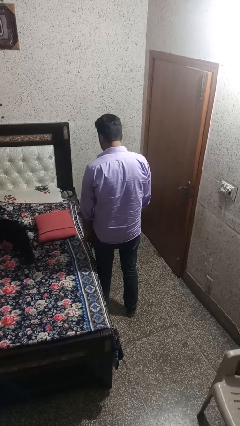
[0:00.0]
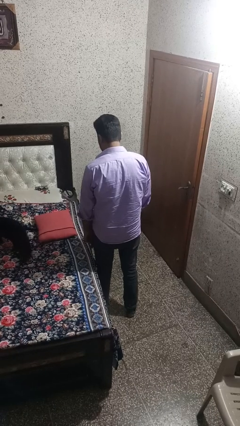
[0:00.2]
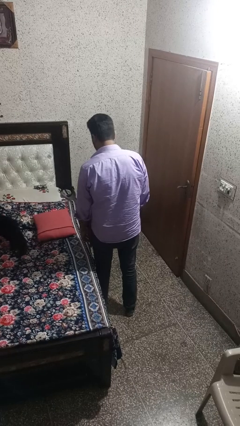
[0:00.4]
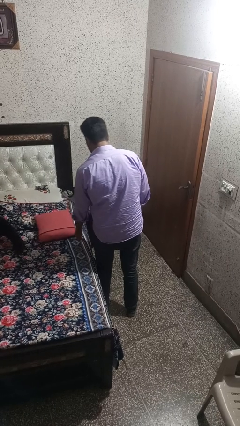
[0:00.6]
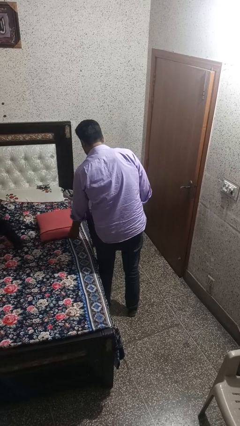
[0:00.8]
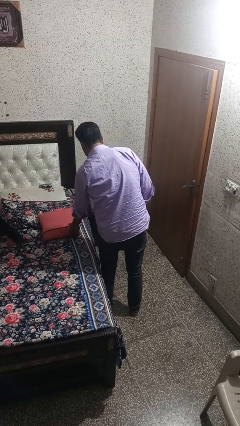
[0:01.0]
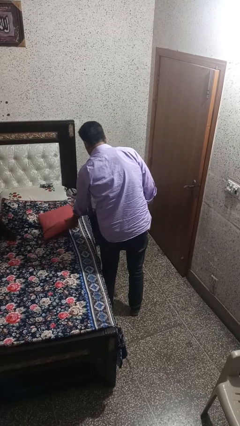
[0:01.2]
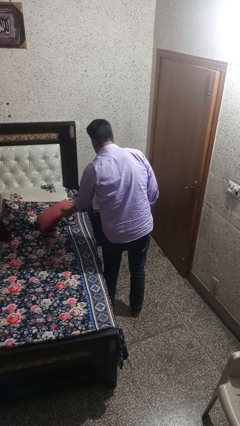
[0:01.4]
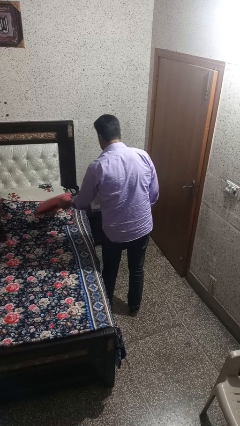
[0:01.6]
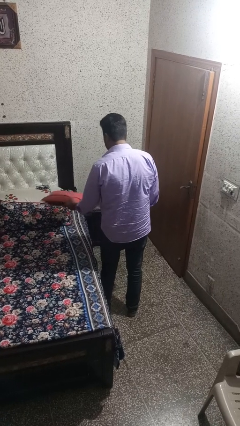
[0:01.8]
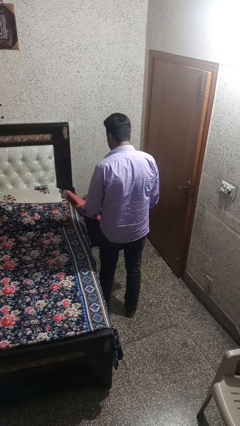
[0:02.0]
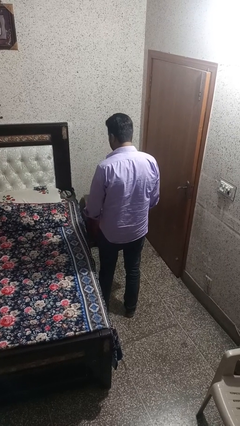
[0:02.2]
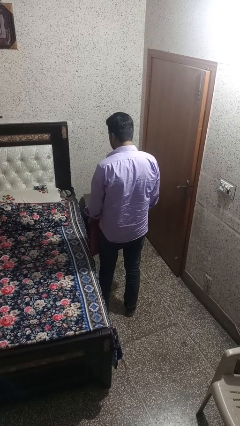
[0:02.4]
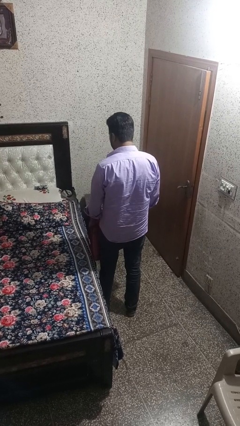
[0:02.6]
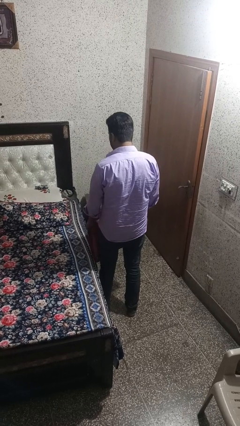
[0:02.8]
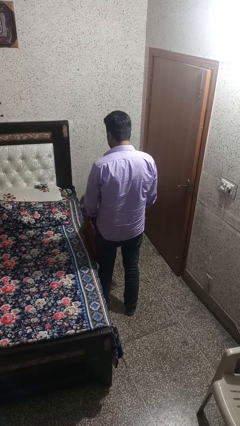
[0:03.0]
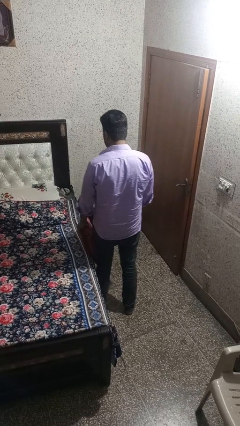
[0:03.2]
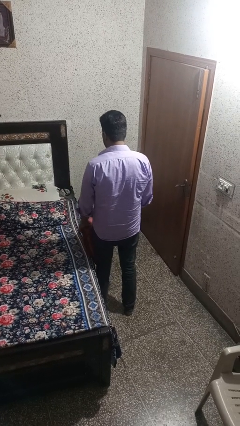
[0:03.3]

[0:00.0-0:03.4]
person picks up object from bed

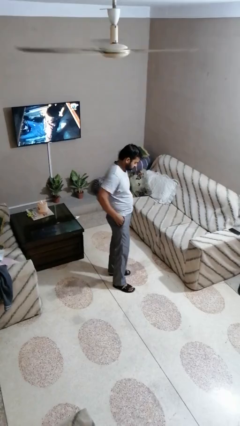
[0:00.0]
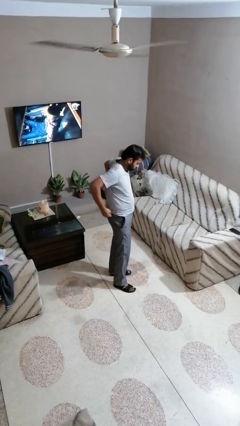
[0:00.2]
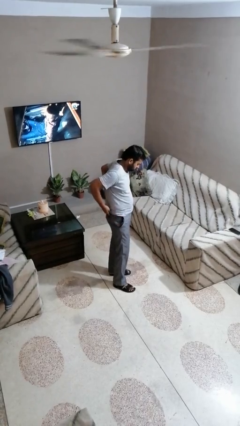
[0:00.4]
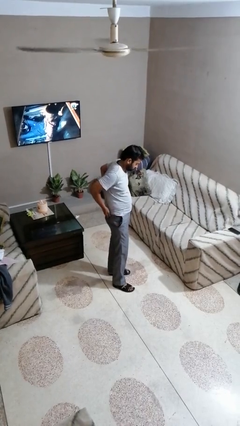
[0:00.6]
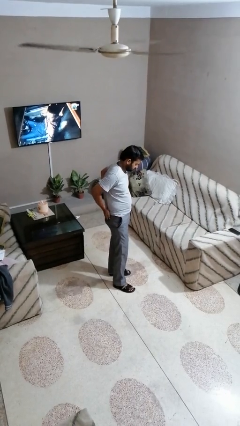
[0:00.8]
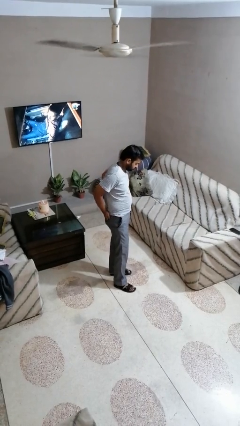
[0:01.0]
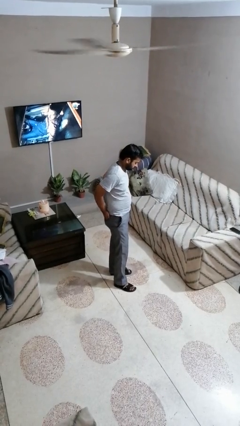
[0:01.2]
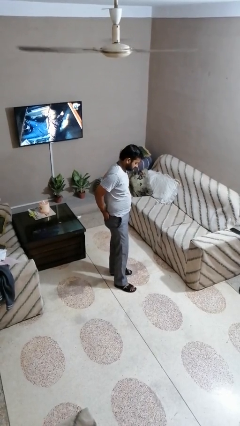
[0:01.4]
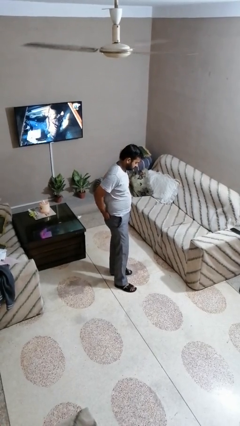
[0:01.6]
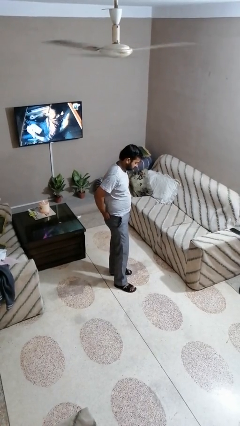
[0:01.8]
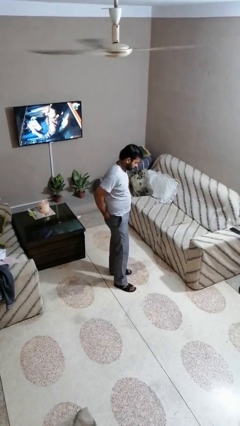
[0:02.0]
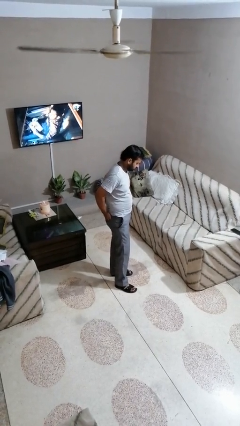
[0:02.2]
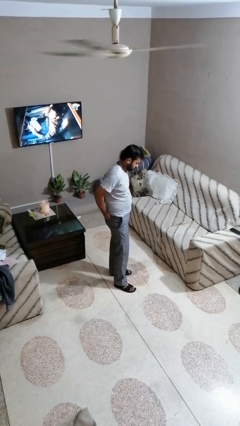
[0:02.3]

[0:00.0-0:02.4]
person puts hands in back pockets

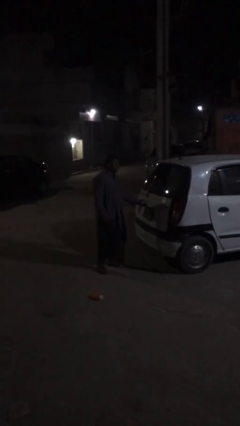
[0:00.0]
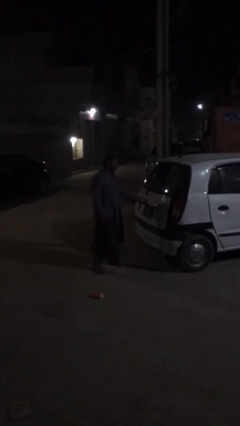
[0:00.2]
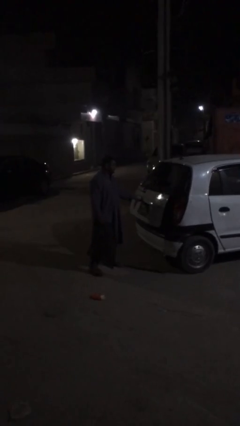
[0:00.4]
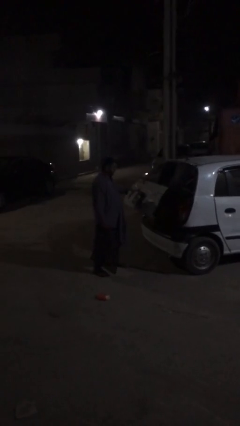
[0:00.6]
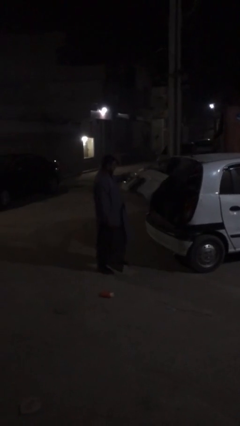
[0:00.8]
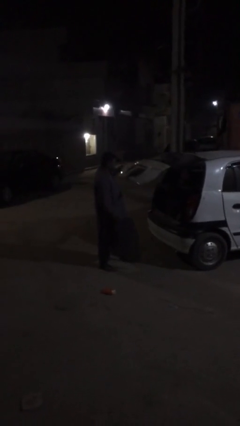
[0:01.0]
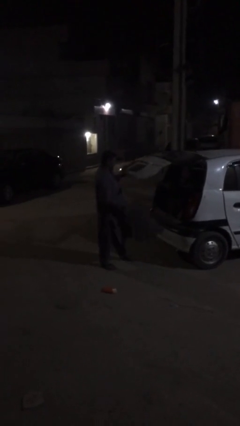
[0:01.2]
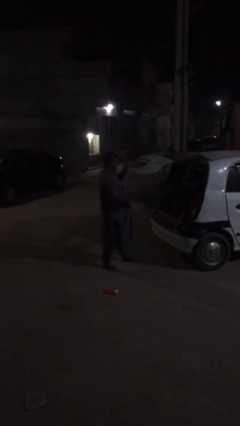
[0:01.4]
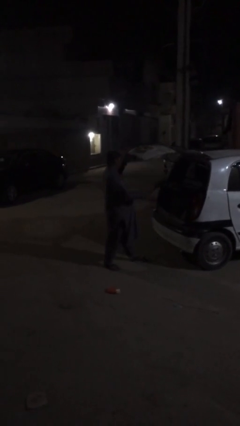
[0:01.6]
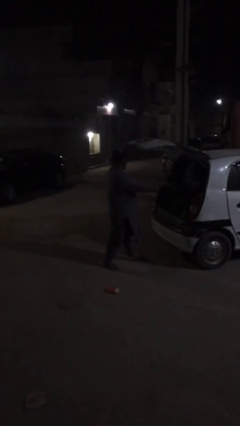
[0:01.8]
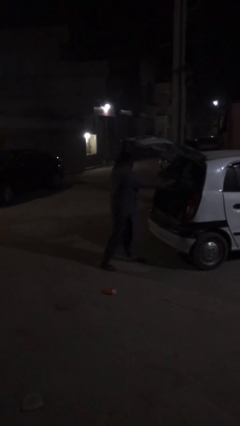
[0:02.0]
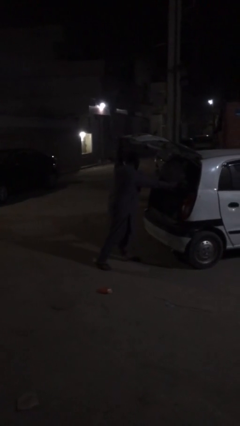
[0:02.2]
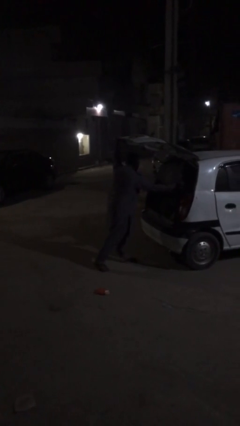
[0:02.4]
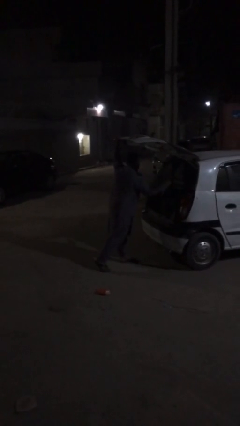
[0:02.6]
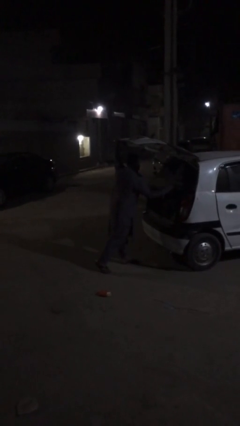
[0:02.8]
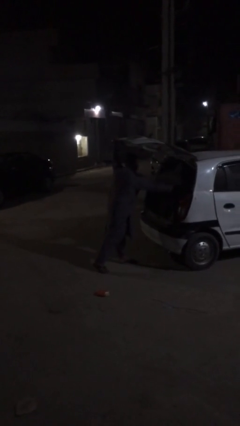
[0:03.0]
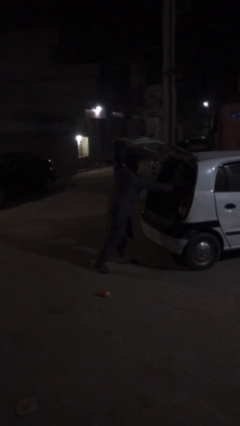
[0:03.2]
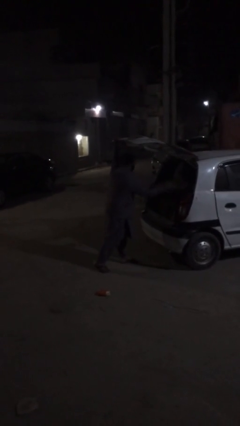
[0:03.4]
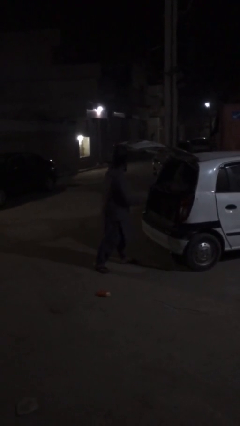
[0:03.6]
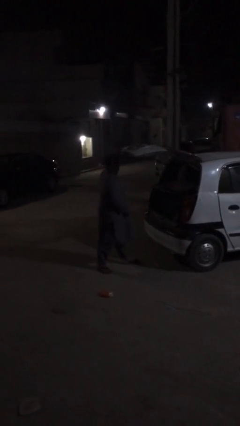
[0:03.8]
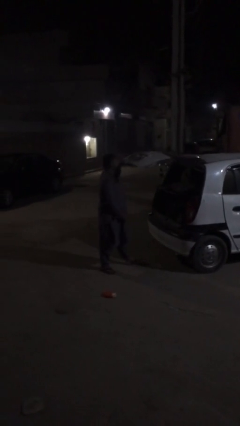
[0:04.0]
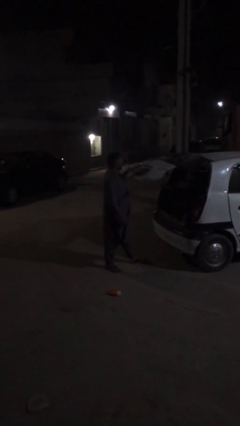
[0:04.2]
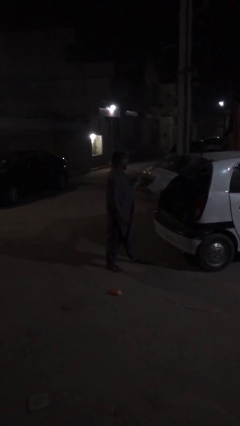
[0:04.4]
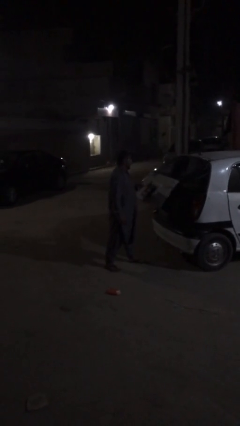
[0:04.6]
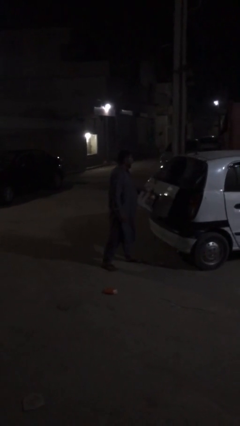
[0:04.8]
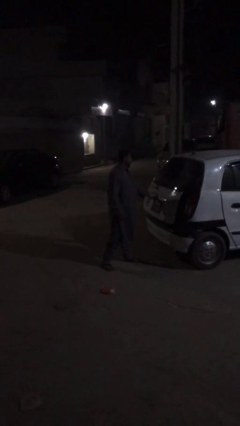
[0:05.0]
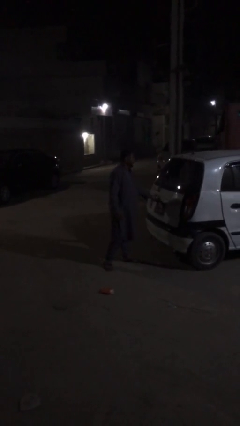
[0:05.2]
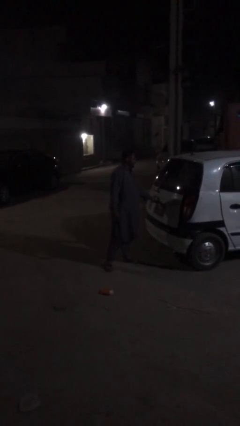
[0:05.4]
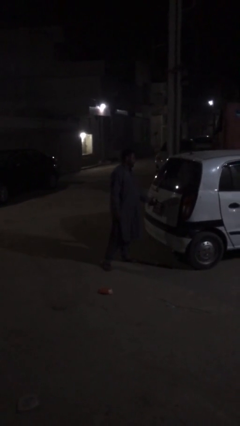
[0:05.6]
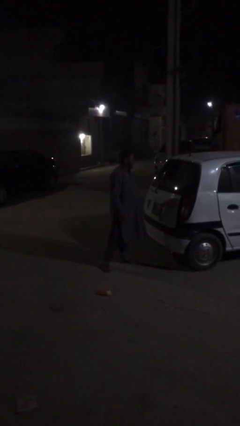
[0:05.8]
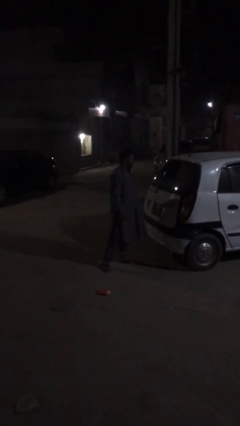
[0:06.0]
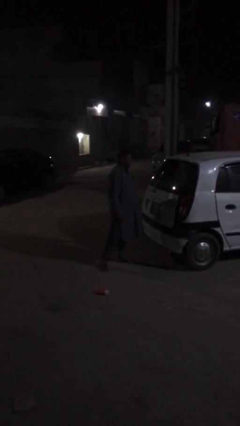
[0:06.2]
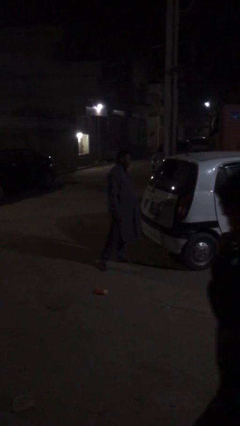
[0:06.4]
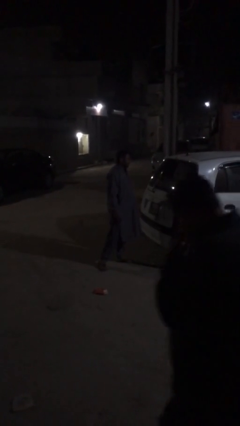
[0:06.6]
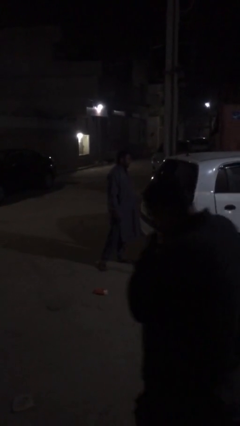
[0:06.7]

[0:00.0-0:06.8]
person loads car

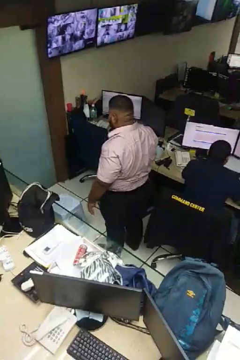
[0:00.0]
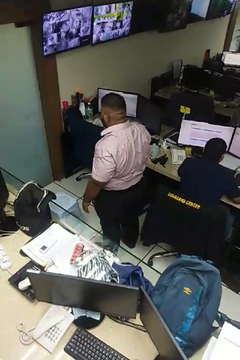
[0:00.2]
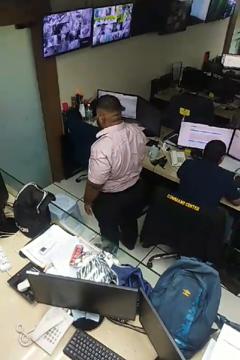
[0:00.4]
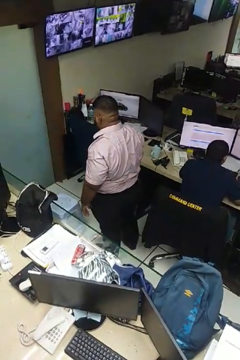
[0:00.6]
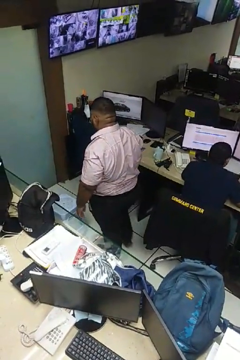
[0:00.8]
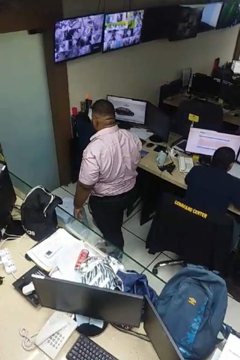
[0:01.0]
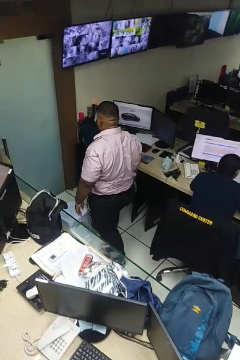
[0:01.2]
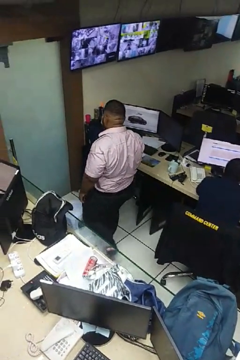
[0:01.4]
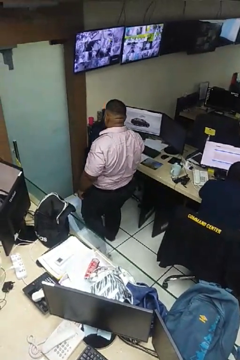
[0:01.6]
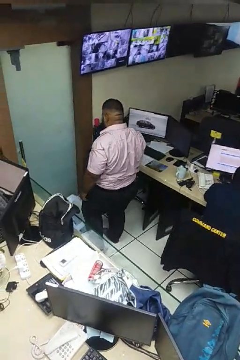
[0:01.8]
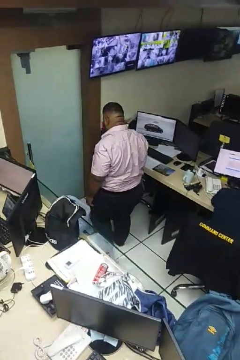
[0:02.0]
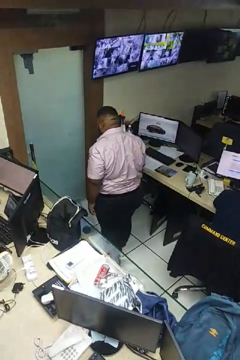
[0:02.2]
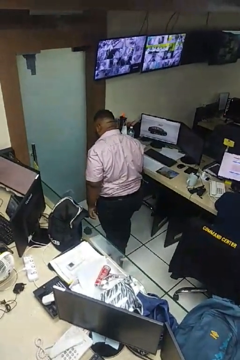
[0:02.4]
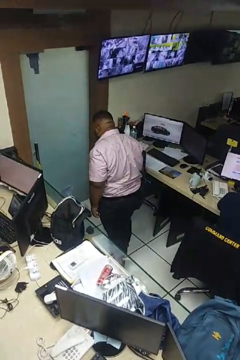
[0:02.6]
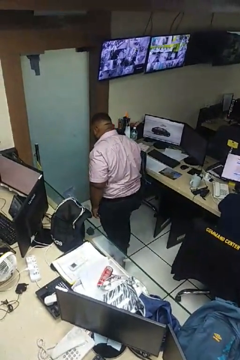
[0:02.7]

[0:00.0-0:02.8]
person knocks over furniture

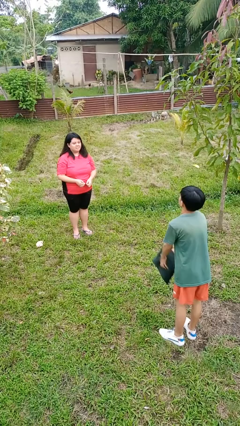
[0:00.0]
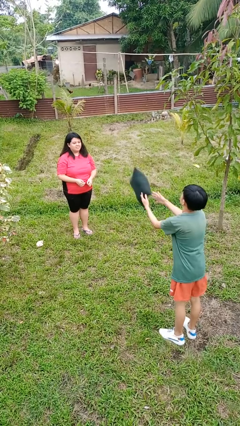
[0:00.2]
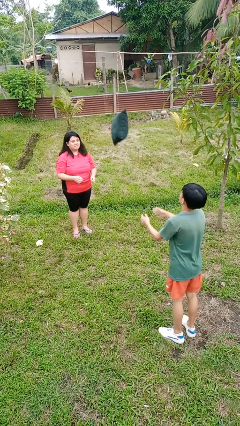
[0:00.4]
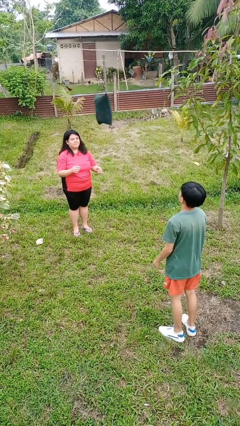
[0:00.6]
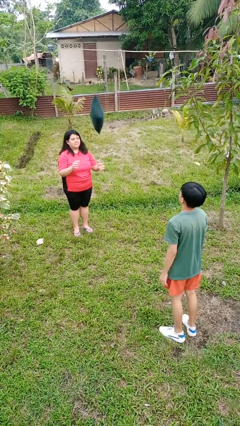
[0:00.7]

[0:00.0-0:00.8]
person catches object from person

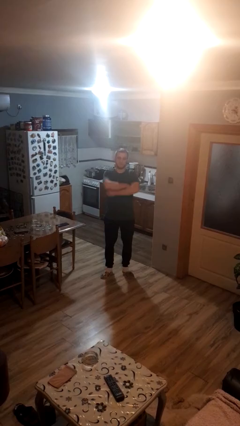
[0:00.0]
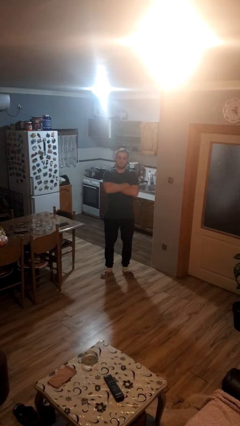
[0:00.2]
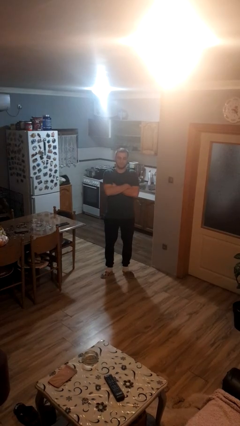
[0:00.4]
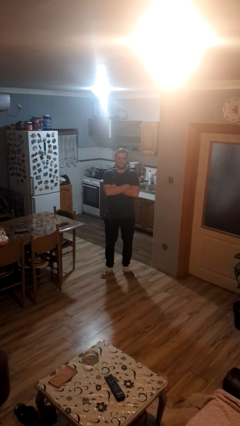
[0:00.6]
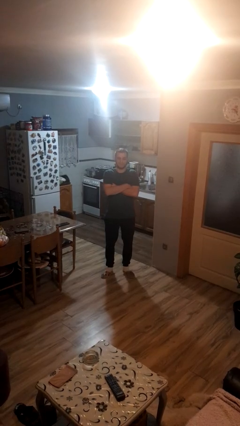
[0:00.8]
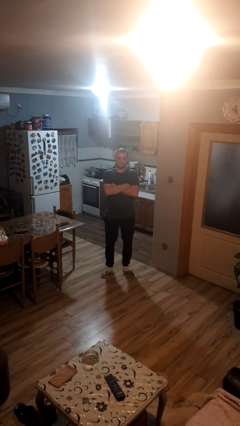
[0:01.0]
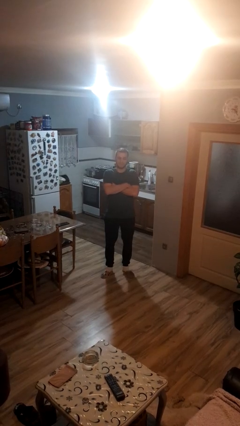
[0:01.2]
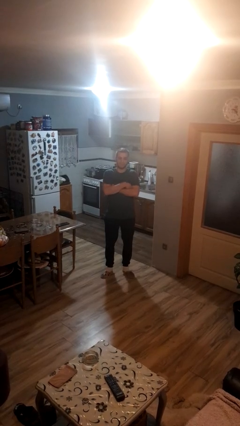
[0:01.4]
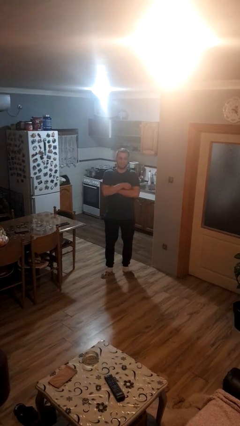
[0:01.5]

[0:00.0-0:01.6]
person crosses arms

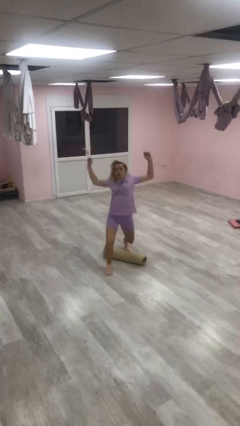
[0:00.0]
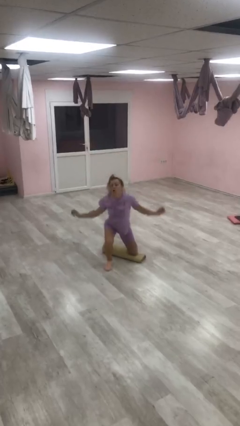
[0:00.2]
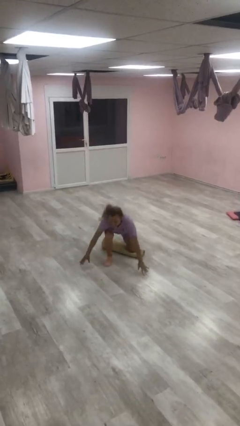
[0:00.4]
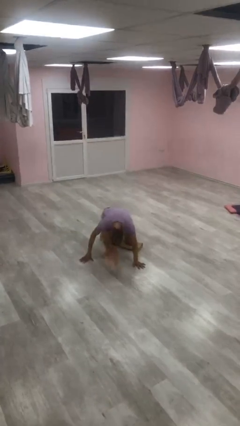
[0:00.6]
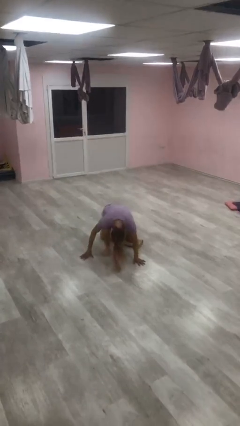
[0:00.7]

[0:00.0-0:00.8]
person trips on object on floor
